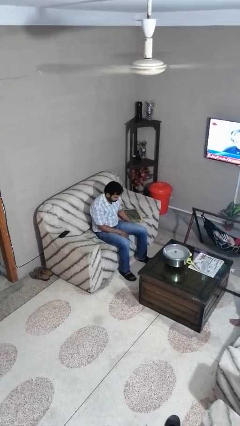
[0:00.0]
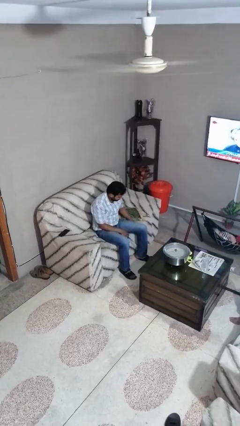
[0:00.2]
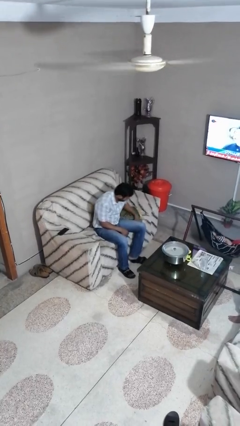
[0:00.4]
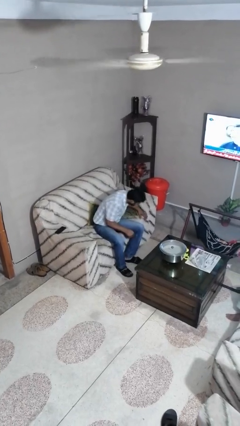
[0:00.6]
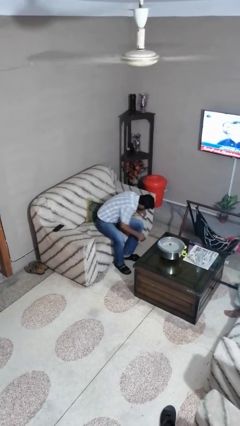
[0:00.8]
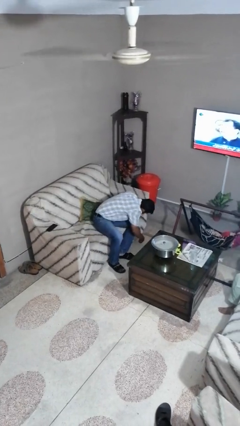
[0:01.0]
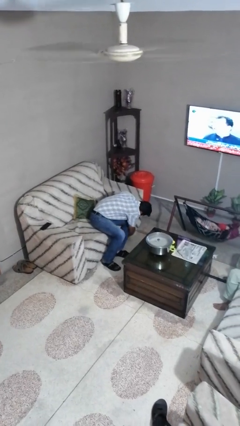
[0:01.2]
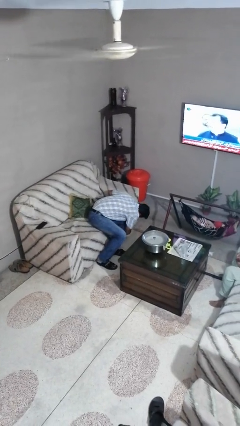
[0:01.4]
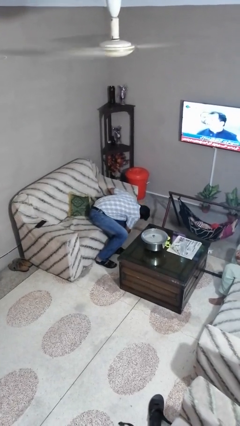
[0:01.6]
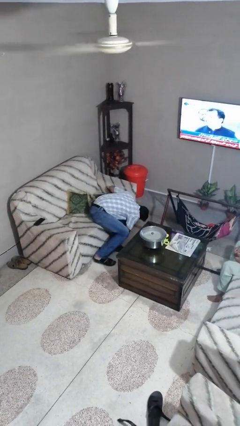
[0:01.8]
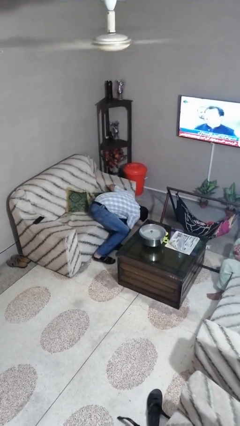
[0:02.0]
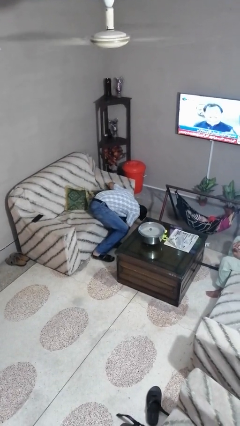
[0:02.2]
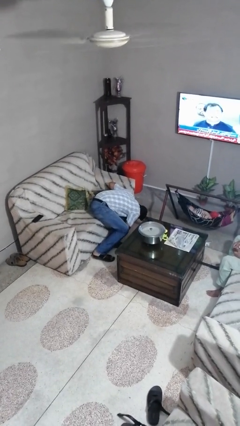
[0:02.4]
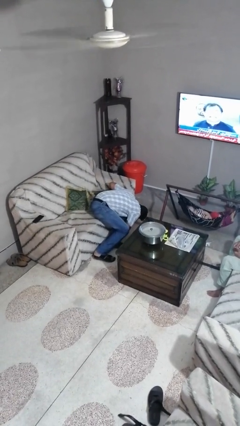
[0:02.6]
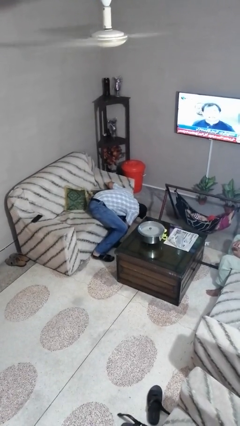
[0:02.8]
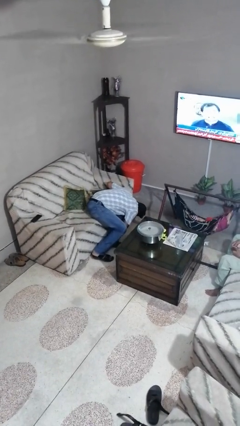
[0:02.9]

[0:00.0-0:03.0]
person searches under couch

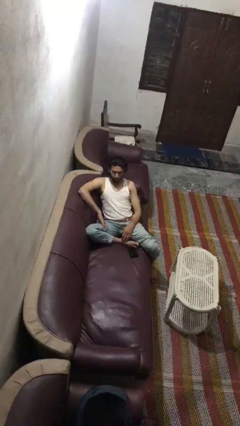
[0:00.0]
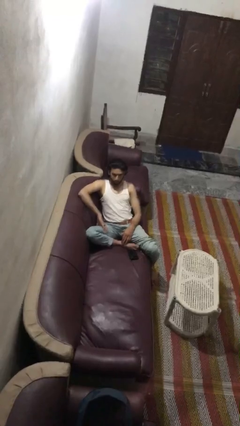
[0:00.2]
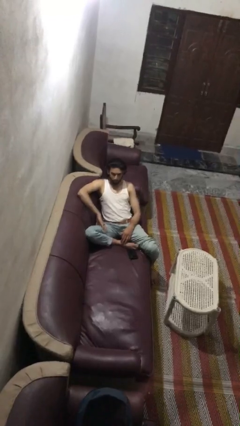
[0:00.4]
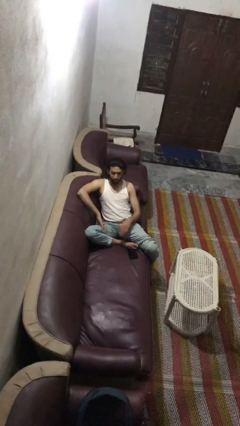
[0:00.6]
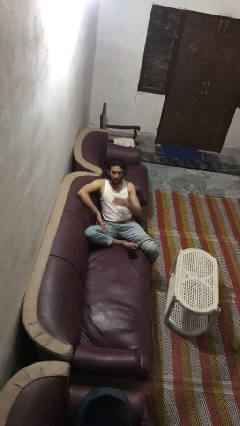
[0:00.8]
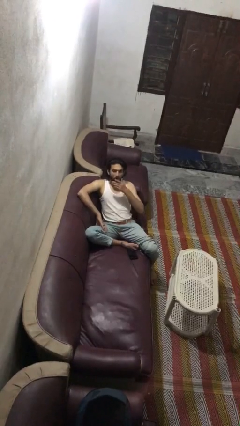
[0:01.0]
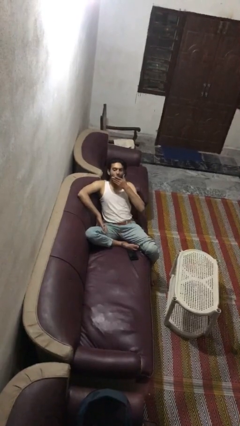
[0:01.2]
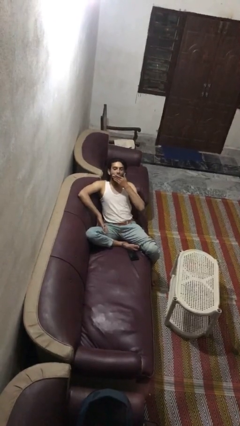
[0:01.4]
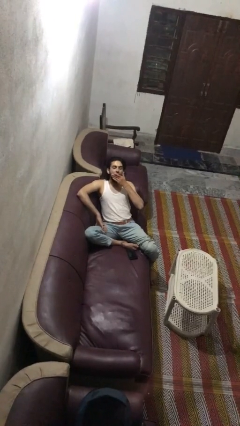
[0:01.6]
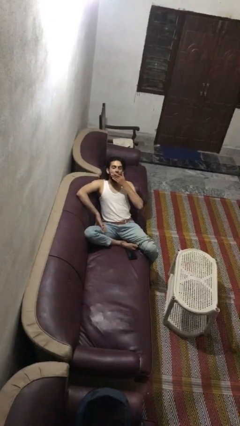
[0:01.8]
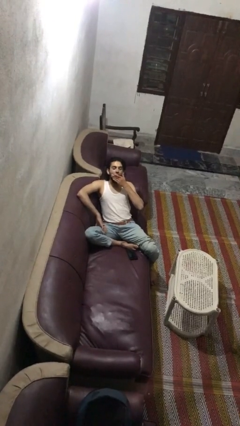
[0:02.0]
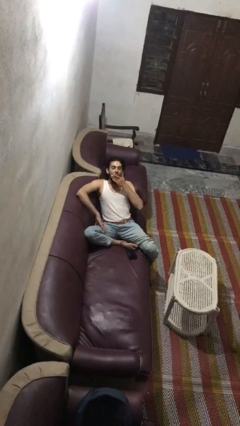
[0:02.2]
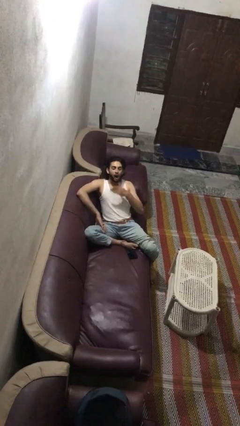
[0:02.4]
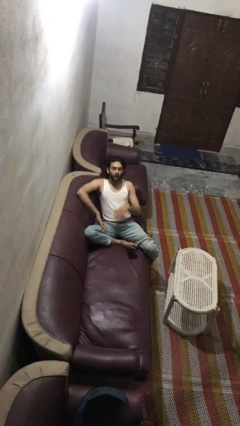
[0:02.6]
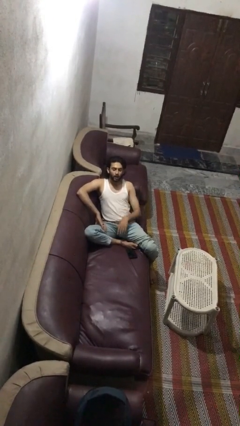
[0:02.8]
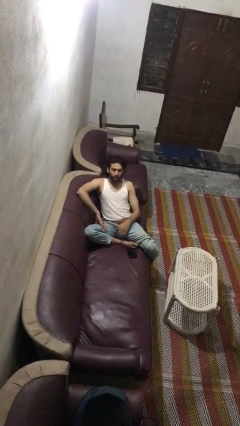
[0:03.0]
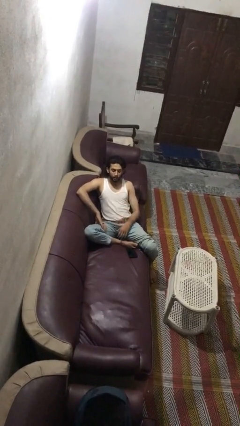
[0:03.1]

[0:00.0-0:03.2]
person yawns

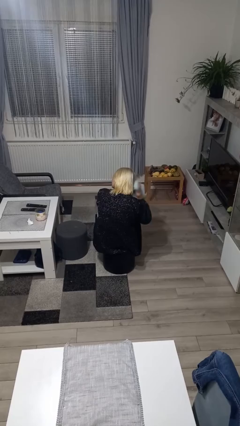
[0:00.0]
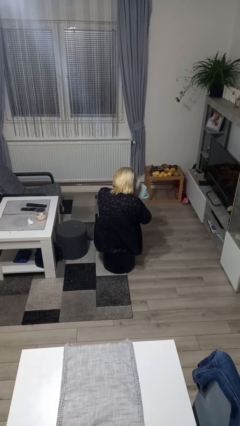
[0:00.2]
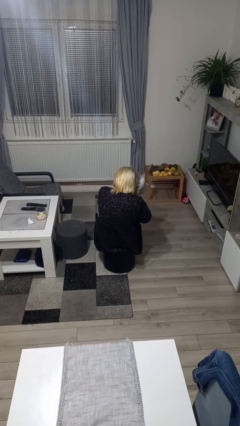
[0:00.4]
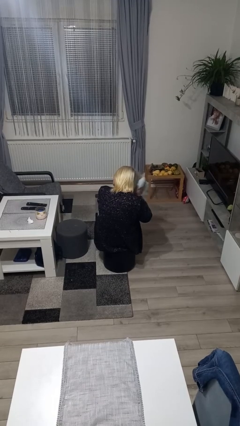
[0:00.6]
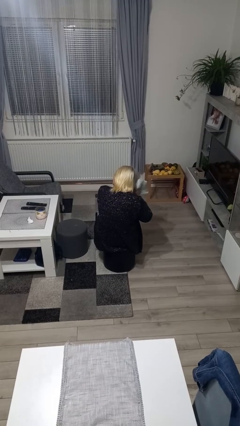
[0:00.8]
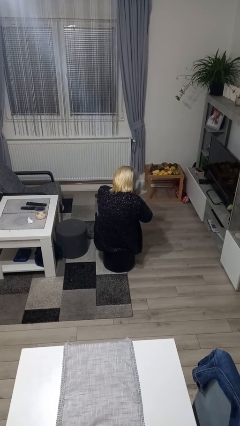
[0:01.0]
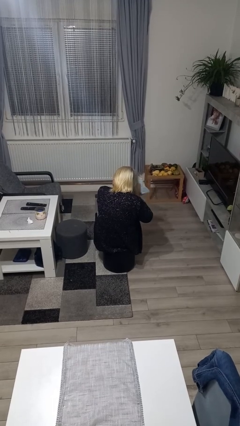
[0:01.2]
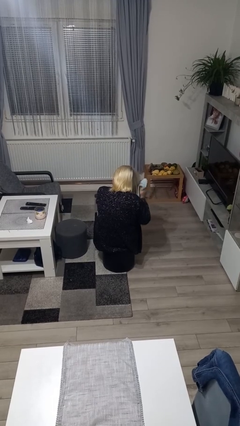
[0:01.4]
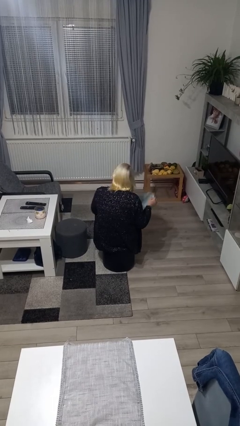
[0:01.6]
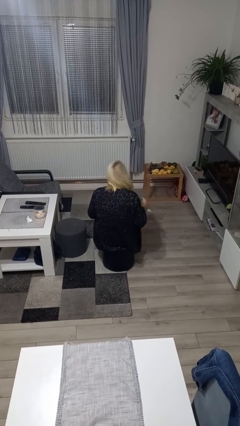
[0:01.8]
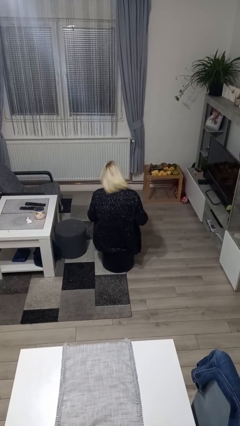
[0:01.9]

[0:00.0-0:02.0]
person dries hair with towel

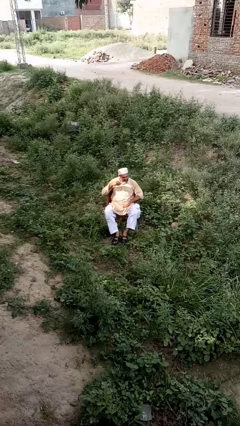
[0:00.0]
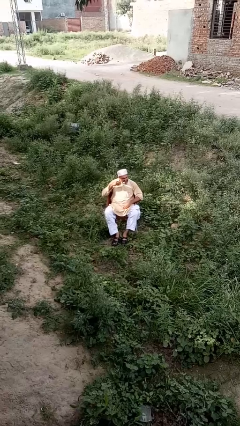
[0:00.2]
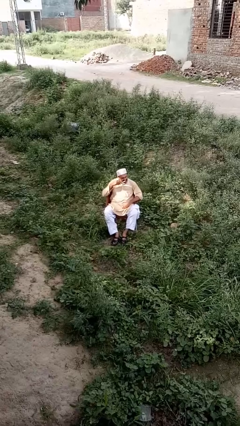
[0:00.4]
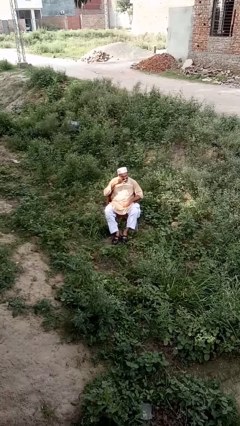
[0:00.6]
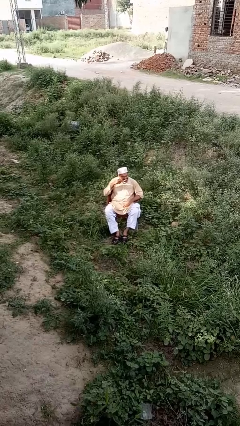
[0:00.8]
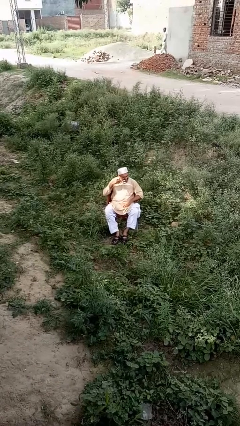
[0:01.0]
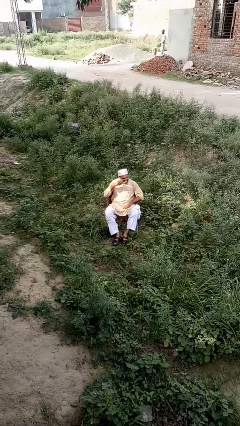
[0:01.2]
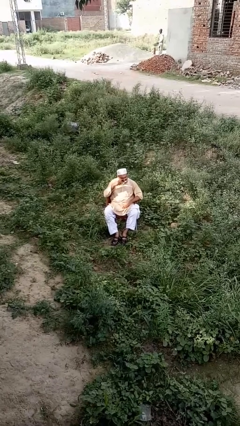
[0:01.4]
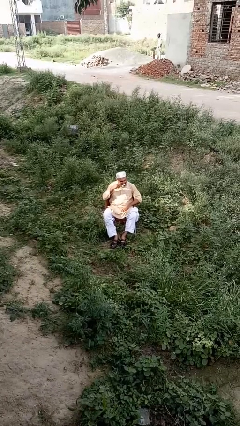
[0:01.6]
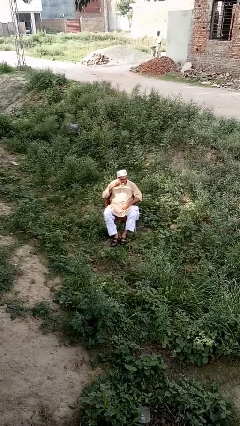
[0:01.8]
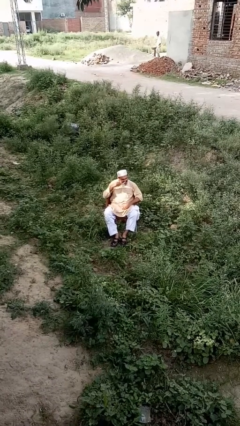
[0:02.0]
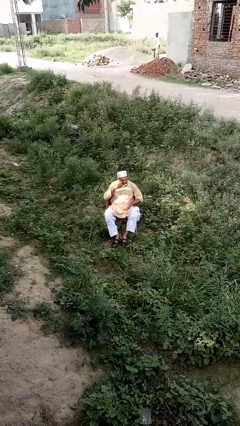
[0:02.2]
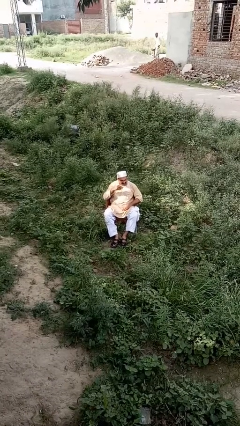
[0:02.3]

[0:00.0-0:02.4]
person brushes teeth

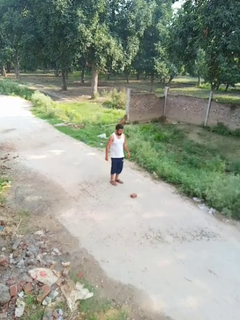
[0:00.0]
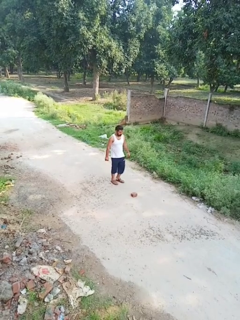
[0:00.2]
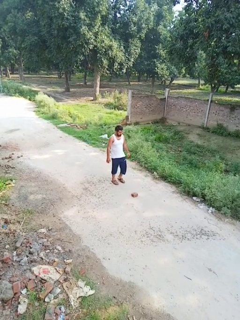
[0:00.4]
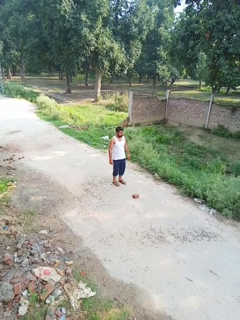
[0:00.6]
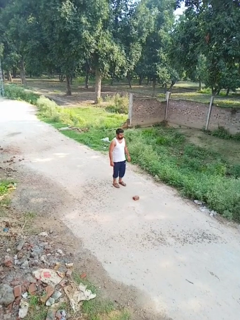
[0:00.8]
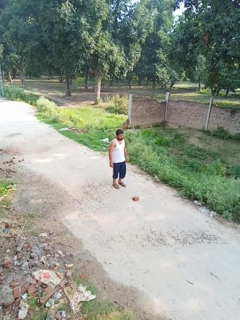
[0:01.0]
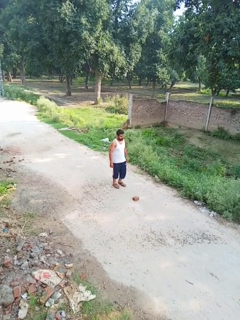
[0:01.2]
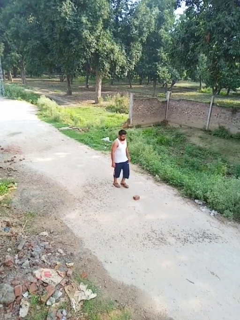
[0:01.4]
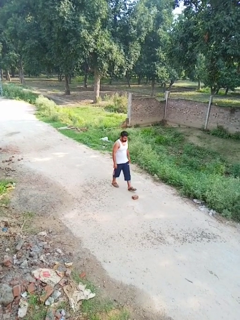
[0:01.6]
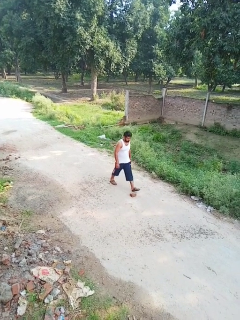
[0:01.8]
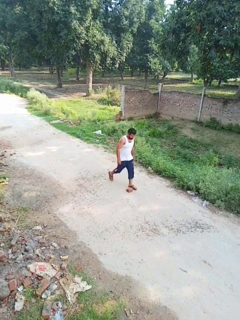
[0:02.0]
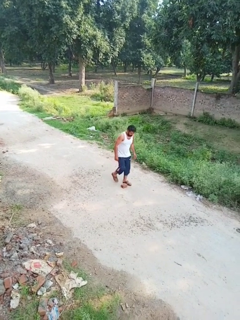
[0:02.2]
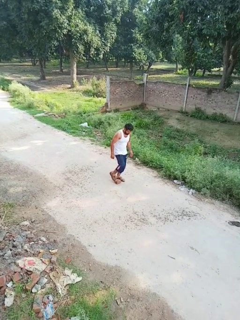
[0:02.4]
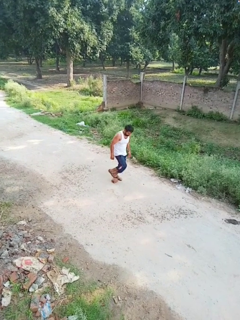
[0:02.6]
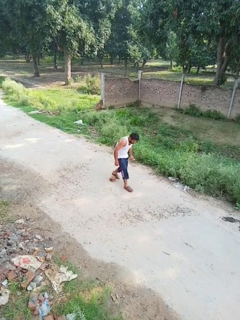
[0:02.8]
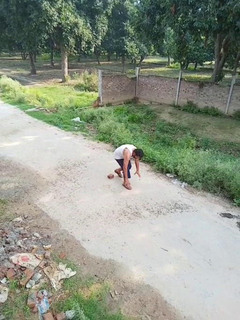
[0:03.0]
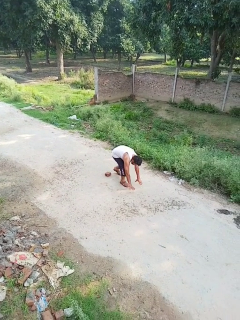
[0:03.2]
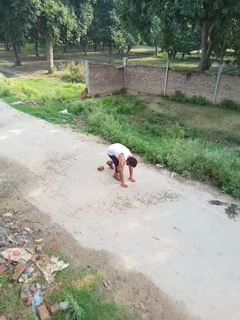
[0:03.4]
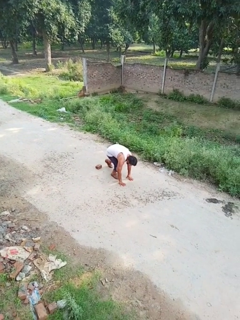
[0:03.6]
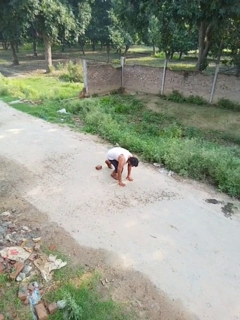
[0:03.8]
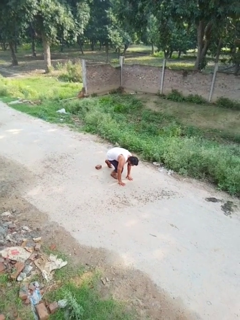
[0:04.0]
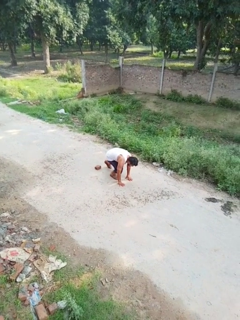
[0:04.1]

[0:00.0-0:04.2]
person trips on object on floor

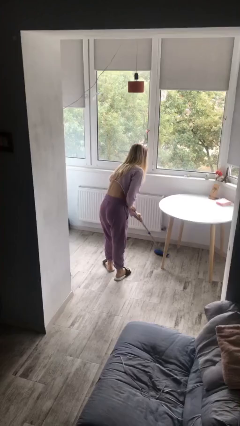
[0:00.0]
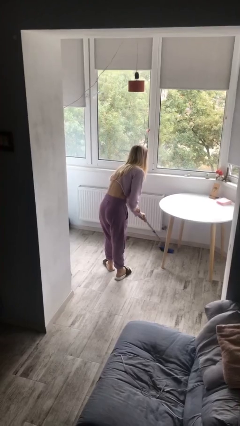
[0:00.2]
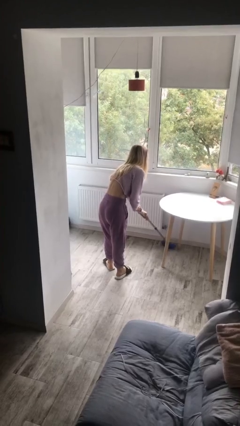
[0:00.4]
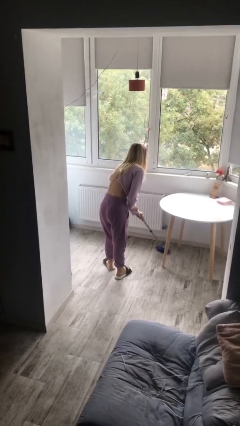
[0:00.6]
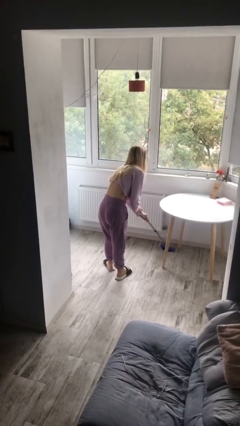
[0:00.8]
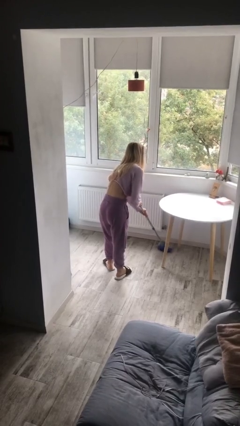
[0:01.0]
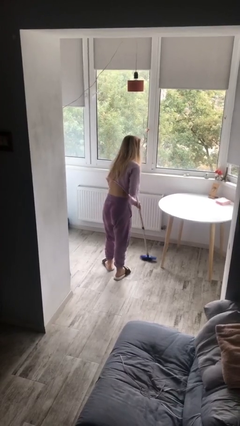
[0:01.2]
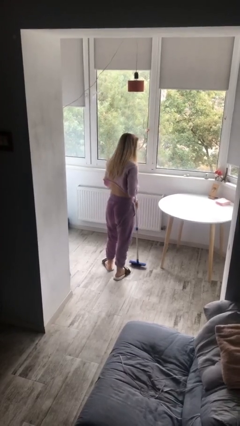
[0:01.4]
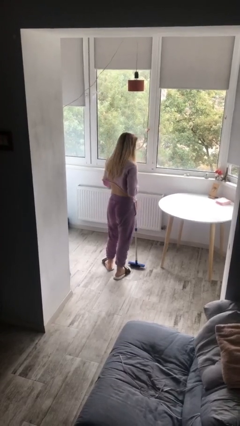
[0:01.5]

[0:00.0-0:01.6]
person mops

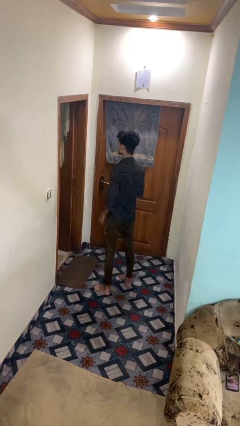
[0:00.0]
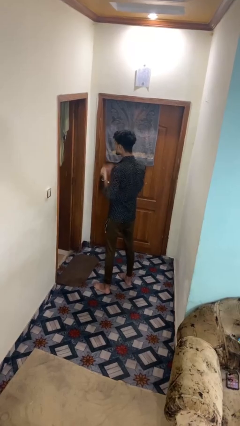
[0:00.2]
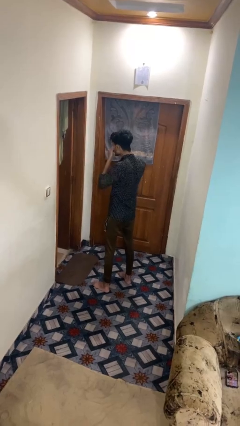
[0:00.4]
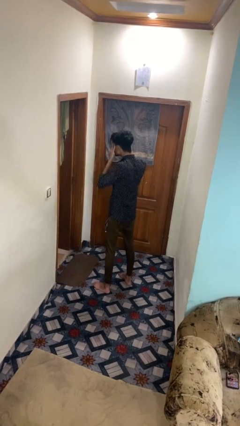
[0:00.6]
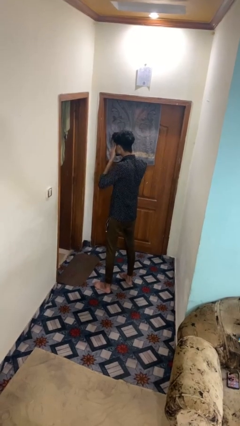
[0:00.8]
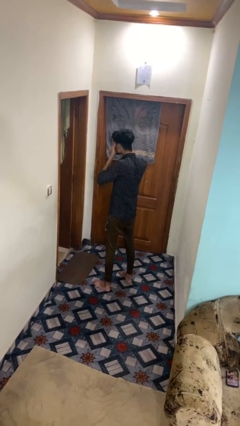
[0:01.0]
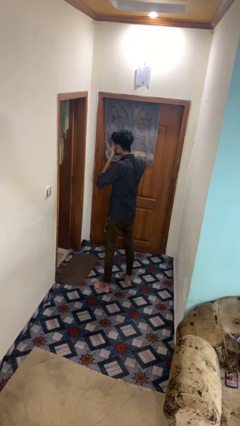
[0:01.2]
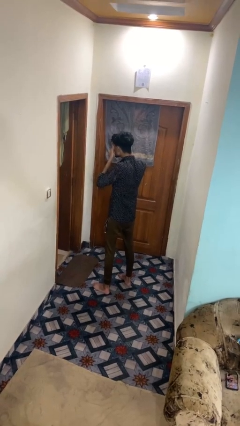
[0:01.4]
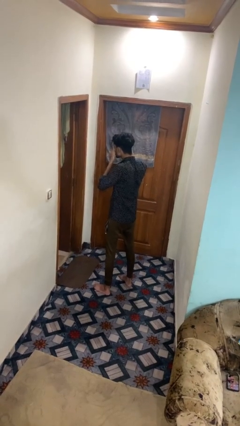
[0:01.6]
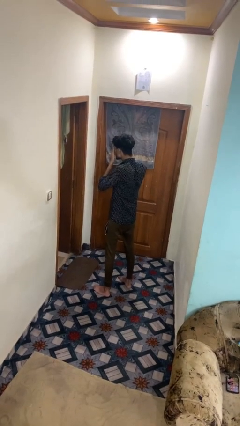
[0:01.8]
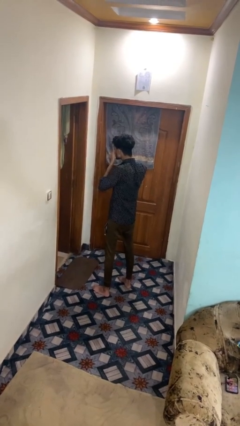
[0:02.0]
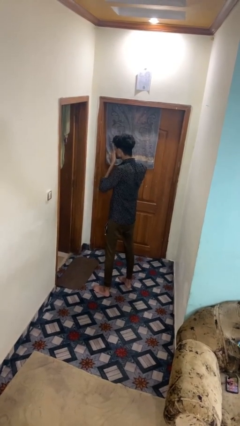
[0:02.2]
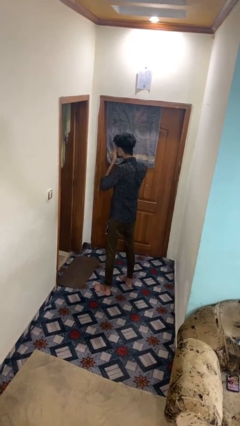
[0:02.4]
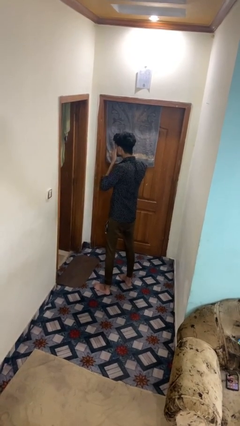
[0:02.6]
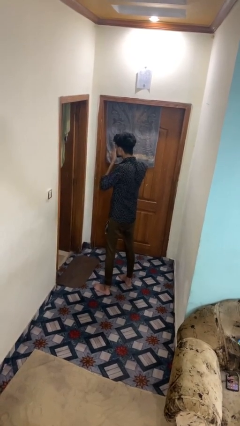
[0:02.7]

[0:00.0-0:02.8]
person rubs eyes
